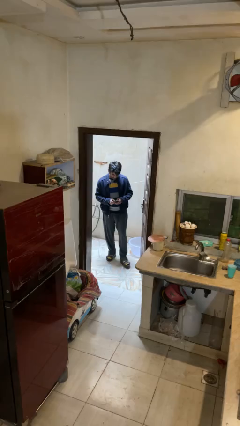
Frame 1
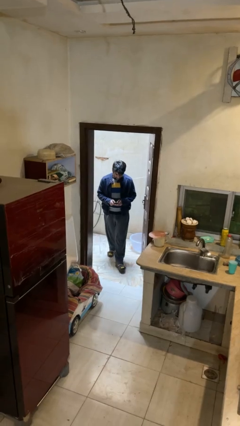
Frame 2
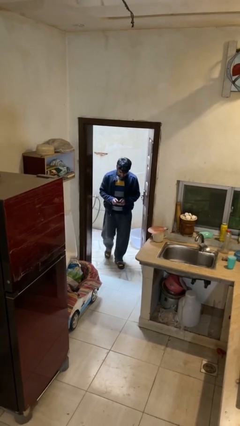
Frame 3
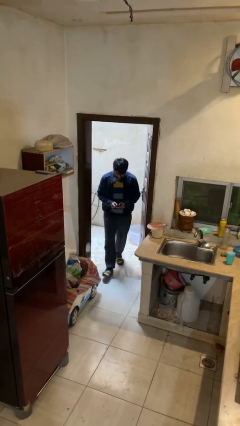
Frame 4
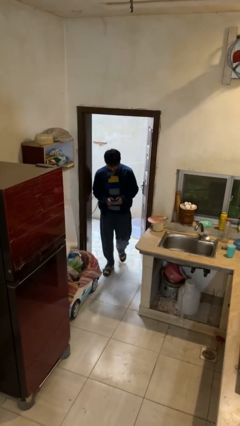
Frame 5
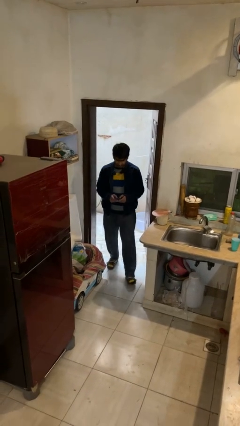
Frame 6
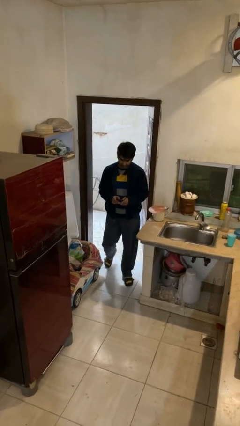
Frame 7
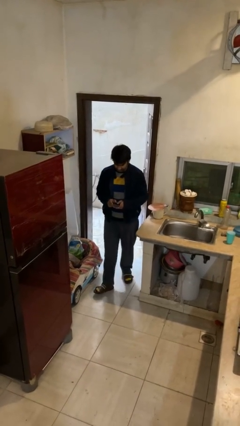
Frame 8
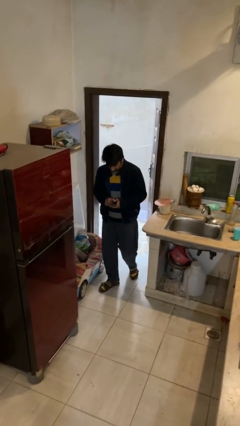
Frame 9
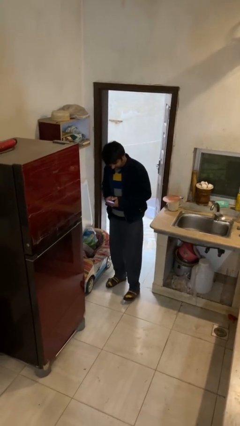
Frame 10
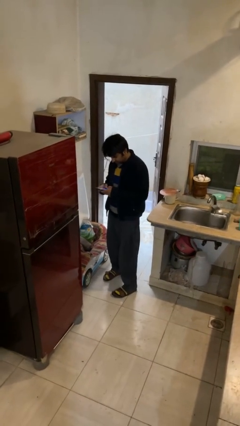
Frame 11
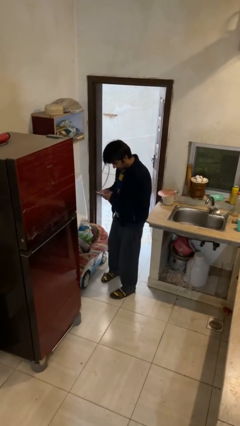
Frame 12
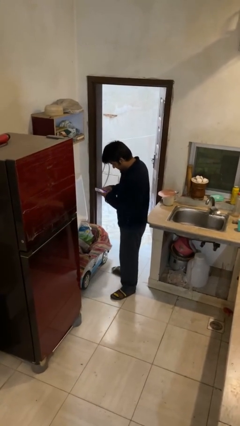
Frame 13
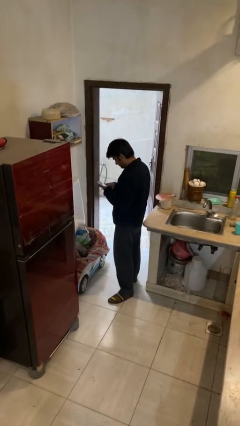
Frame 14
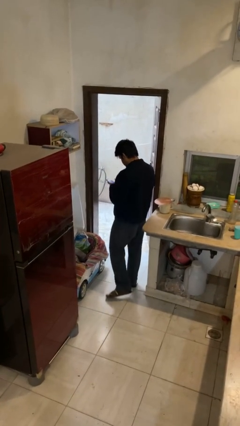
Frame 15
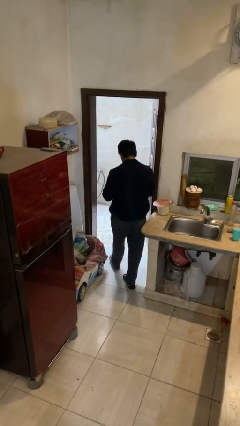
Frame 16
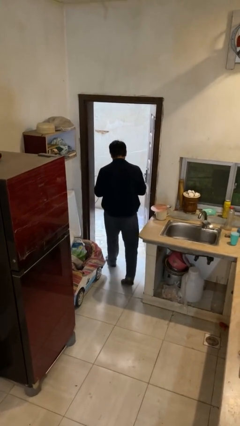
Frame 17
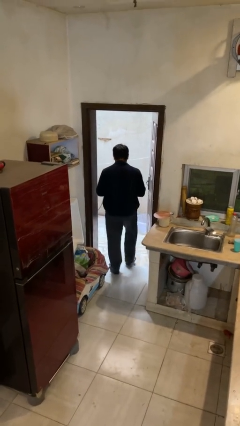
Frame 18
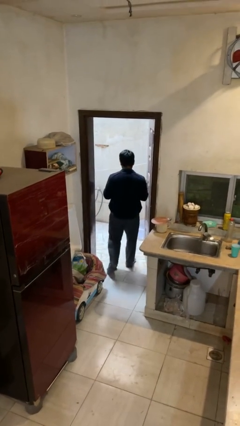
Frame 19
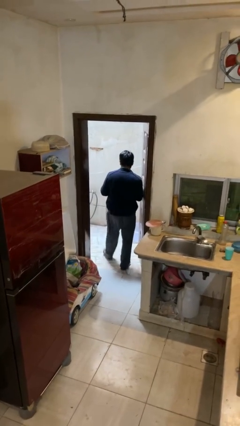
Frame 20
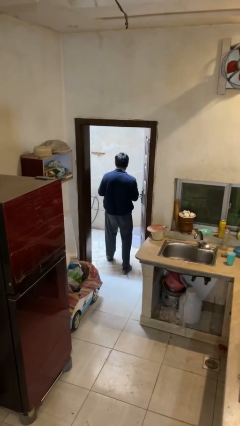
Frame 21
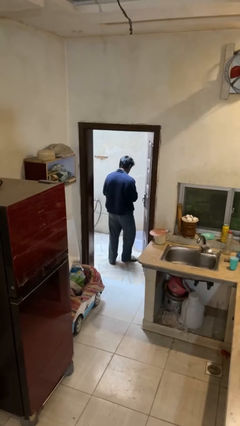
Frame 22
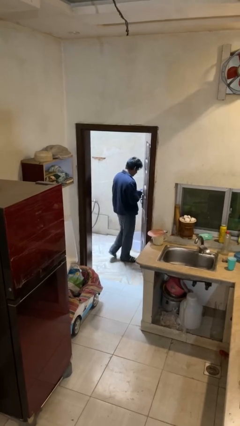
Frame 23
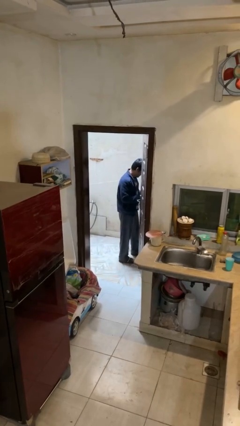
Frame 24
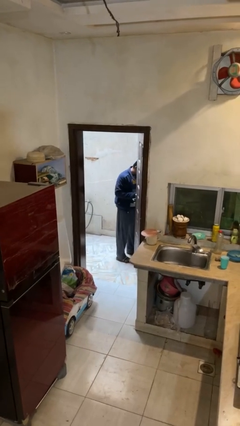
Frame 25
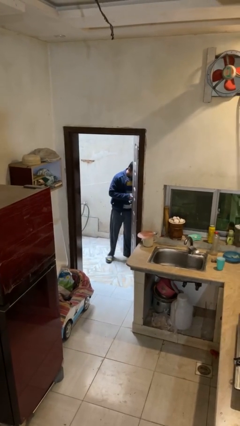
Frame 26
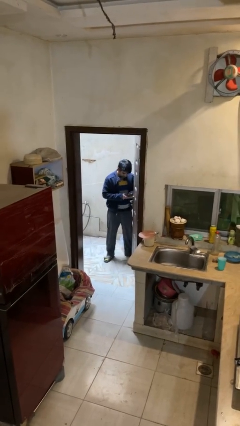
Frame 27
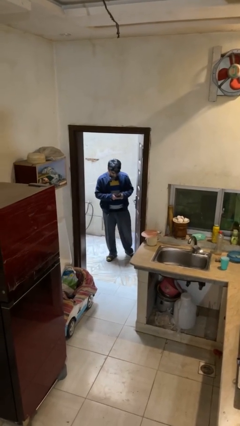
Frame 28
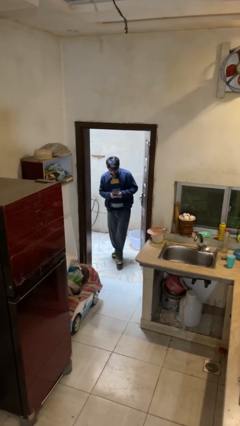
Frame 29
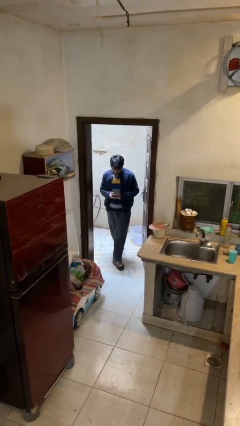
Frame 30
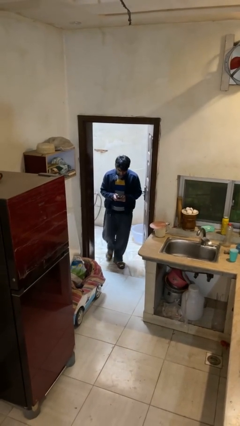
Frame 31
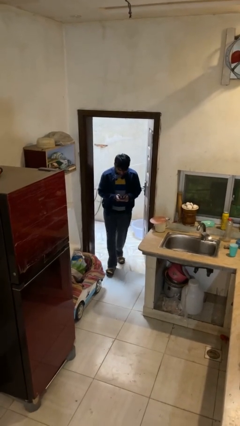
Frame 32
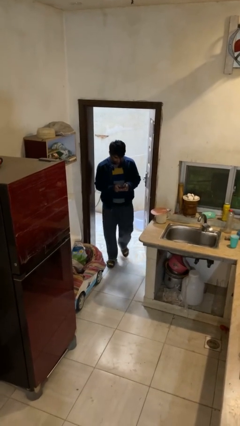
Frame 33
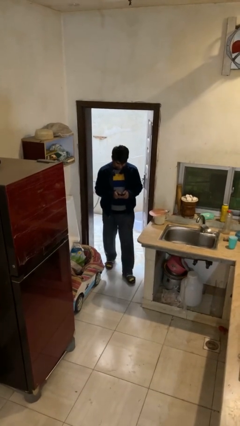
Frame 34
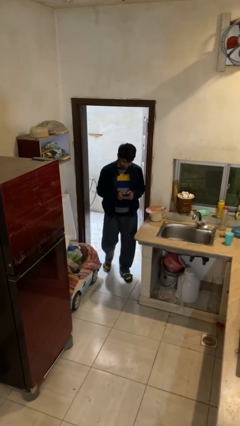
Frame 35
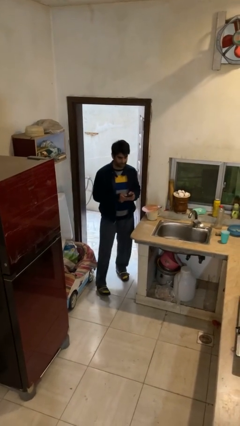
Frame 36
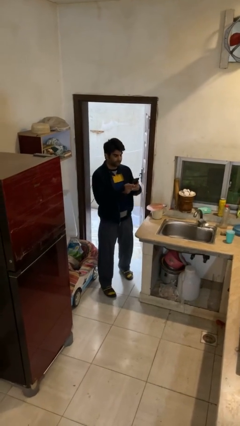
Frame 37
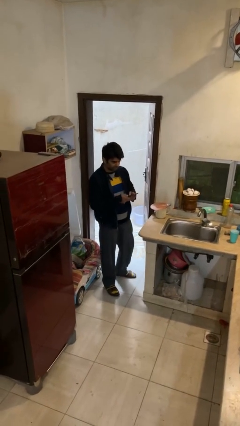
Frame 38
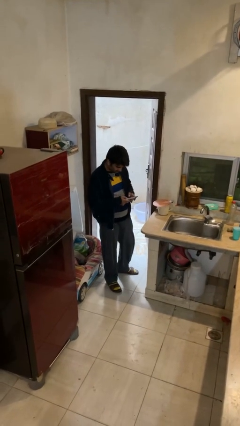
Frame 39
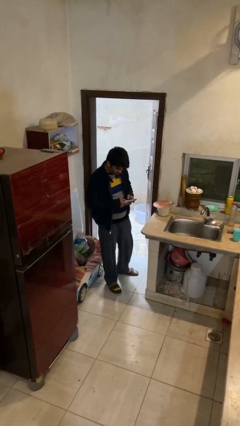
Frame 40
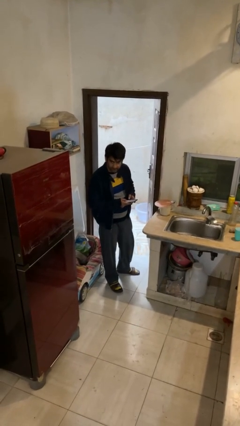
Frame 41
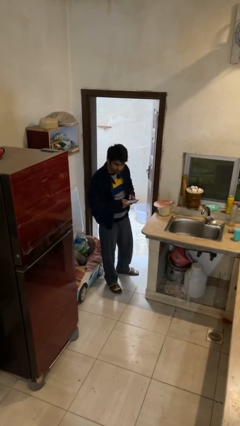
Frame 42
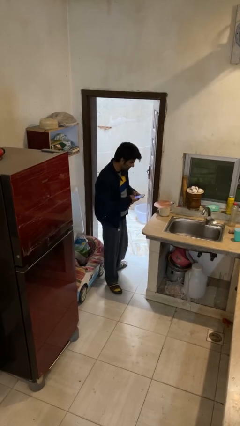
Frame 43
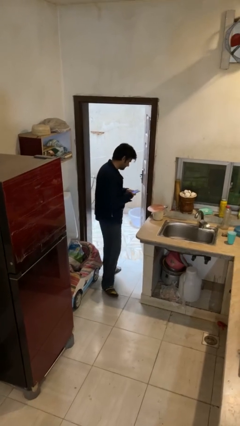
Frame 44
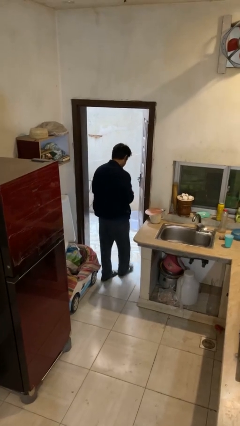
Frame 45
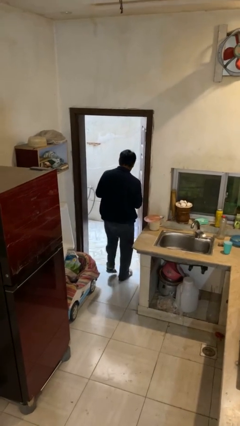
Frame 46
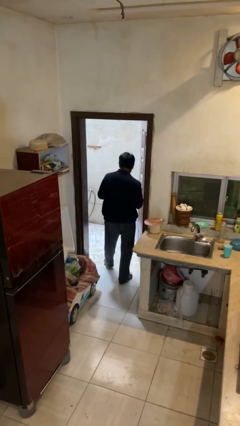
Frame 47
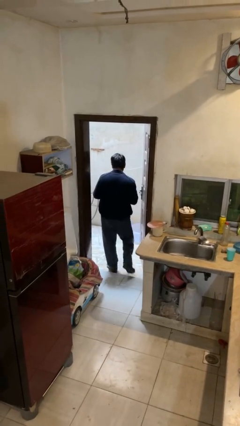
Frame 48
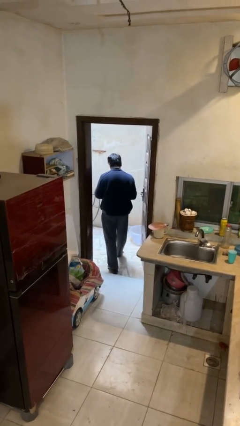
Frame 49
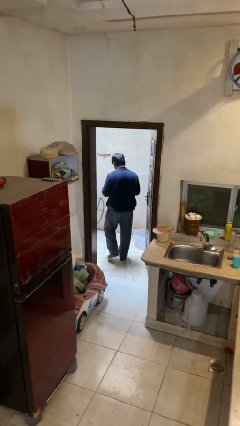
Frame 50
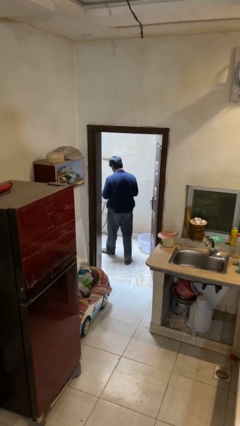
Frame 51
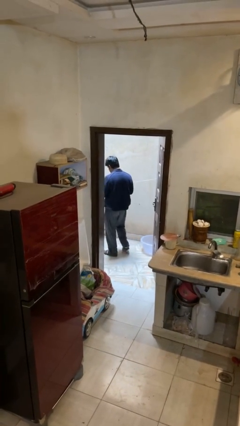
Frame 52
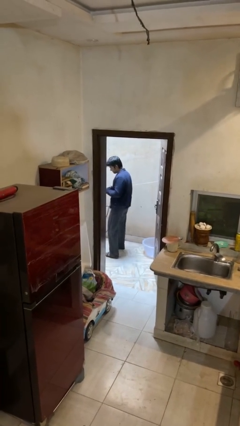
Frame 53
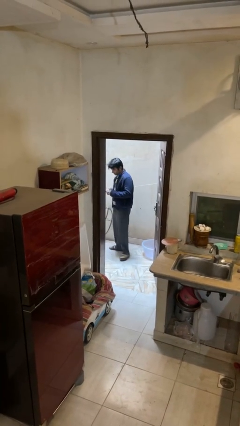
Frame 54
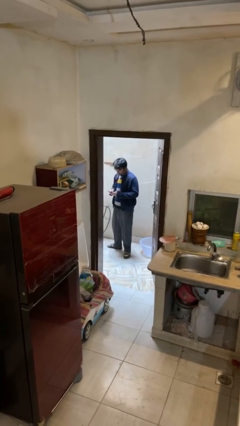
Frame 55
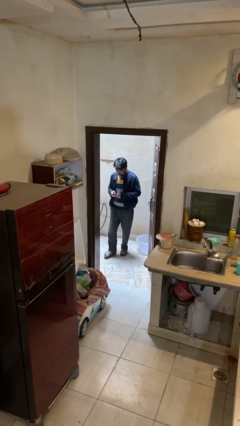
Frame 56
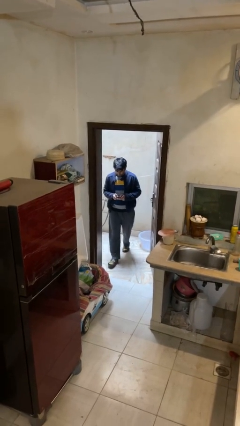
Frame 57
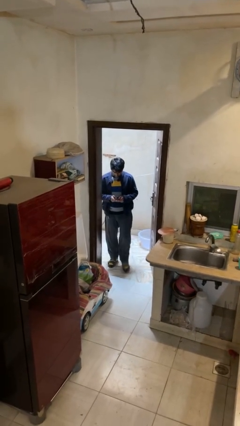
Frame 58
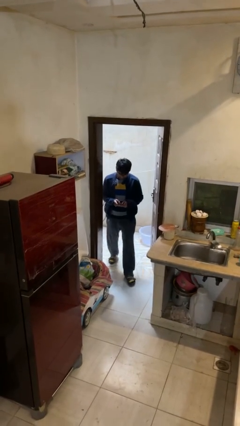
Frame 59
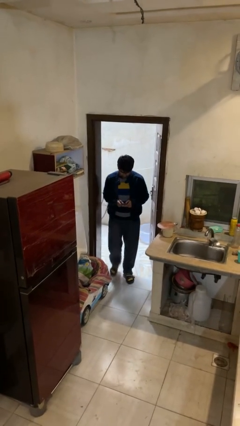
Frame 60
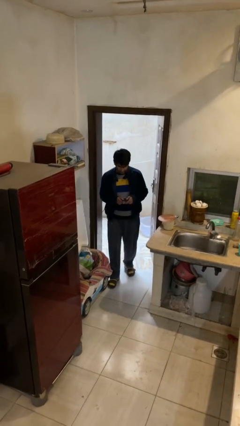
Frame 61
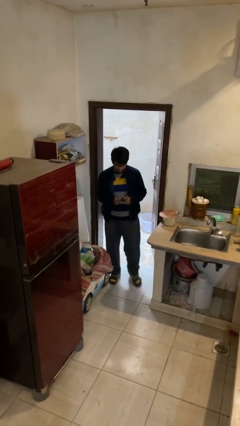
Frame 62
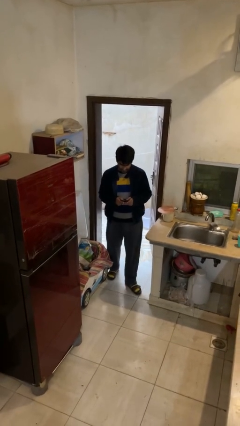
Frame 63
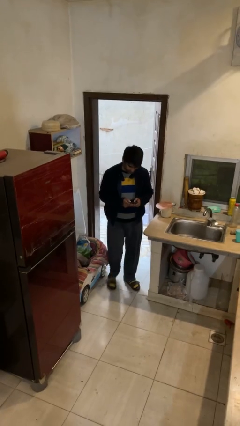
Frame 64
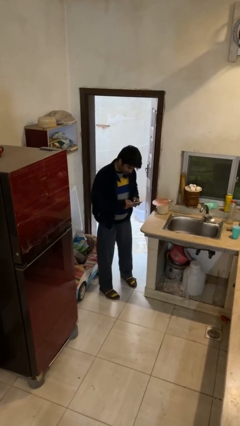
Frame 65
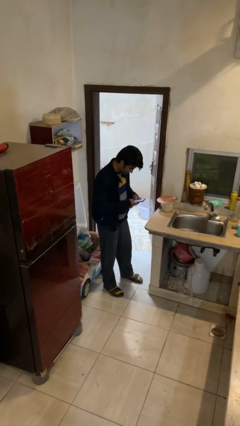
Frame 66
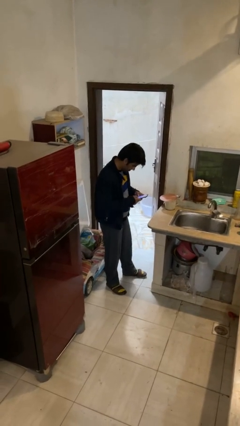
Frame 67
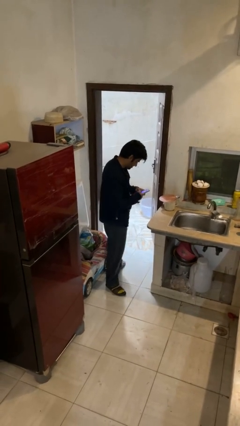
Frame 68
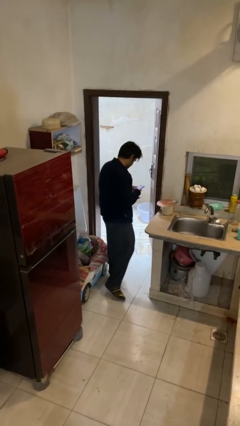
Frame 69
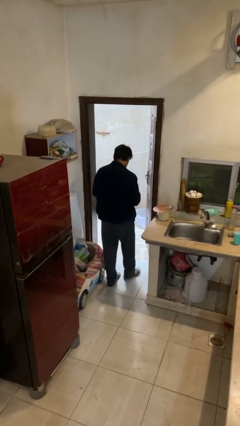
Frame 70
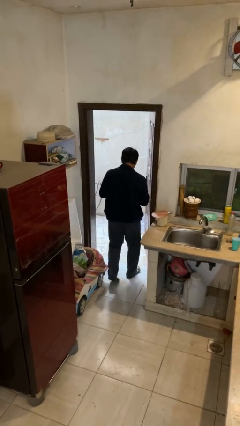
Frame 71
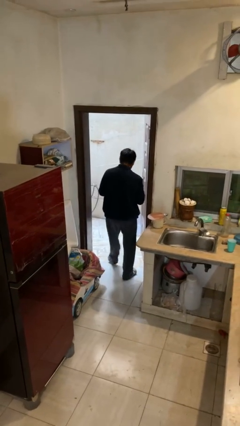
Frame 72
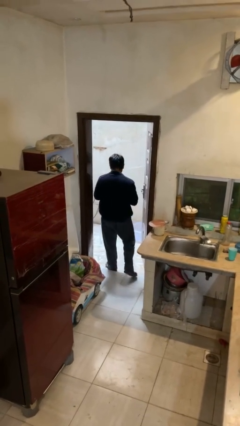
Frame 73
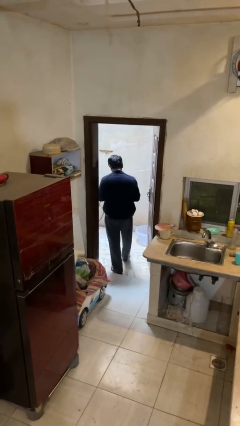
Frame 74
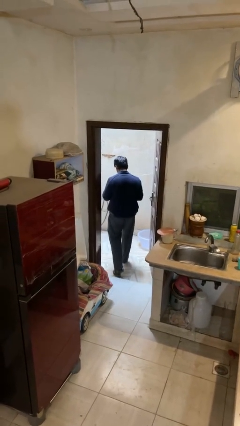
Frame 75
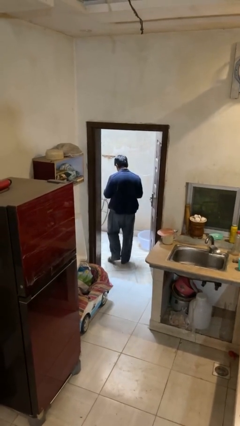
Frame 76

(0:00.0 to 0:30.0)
person texts on phone

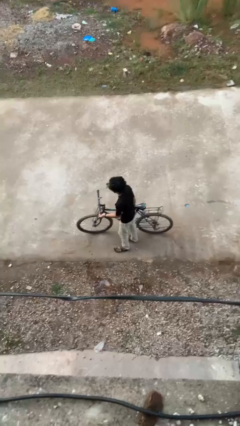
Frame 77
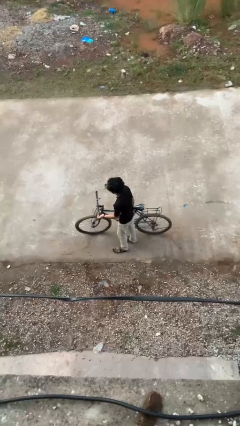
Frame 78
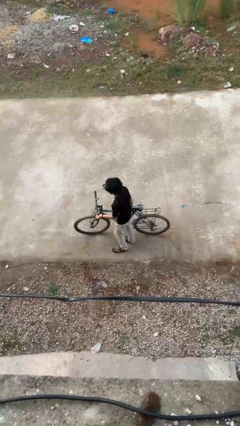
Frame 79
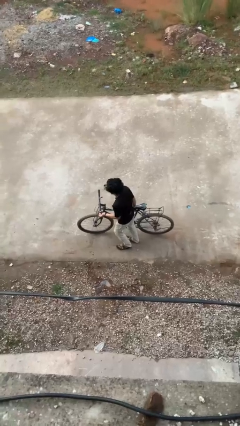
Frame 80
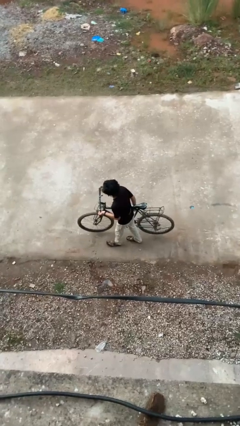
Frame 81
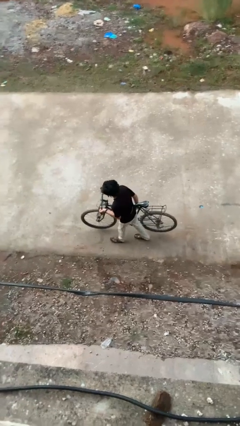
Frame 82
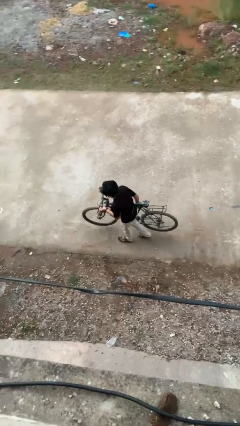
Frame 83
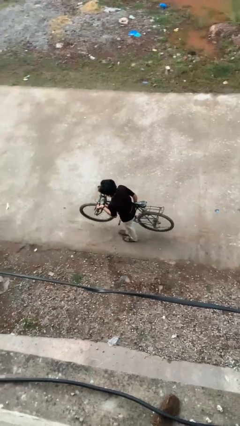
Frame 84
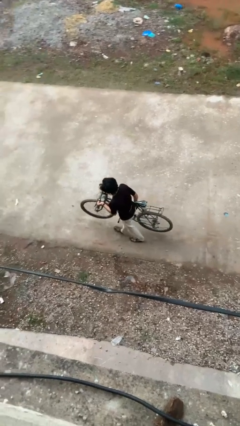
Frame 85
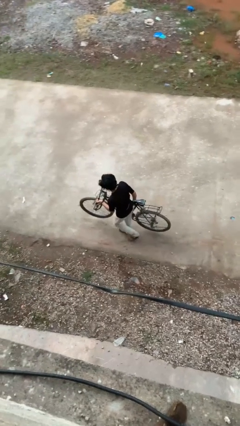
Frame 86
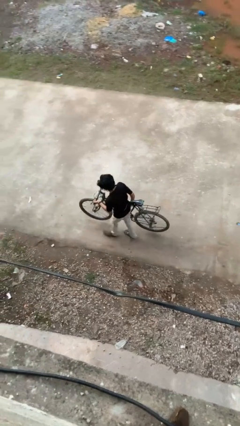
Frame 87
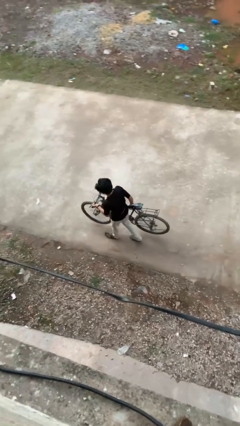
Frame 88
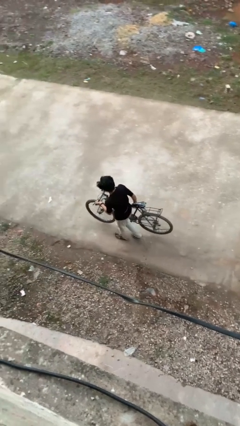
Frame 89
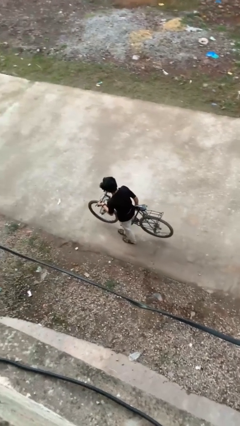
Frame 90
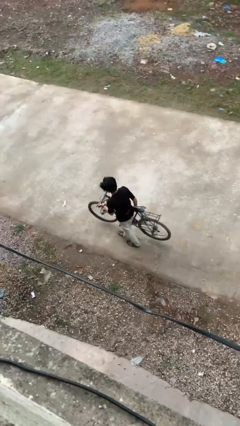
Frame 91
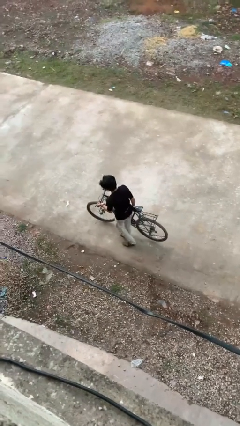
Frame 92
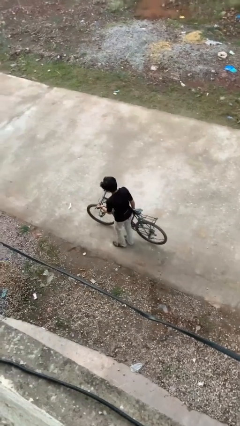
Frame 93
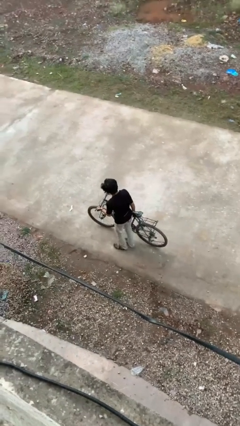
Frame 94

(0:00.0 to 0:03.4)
person carries bicycle
